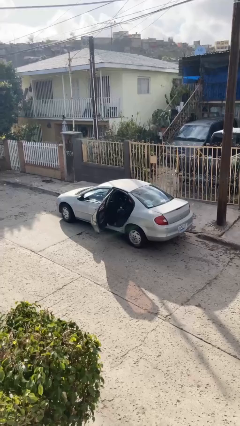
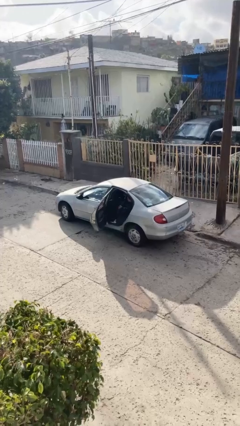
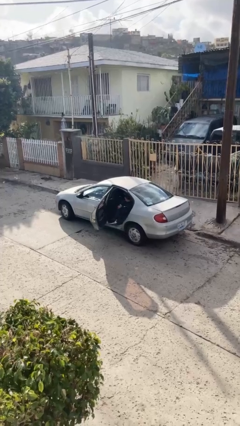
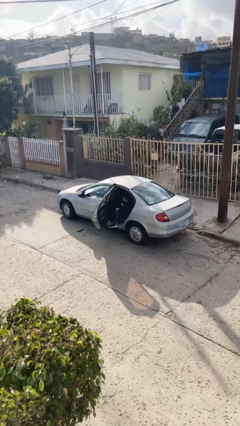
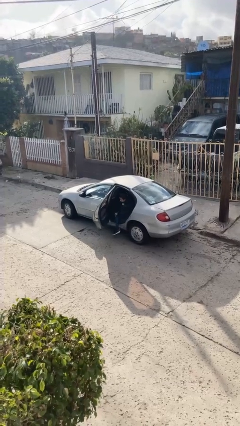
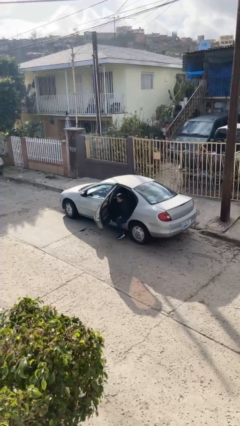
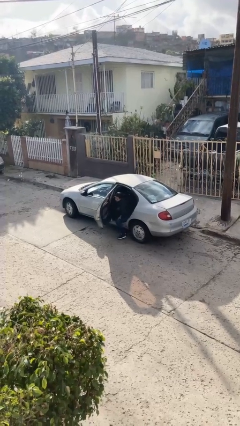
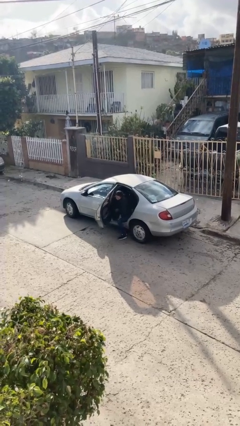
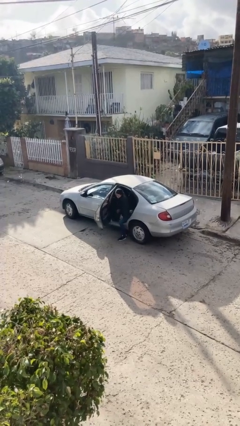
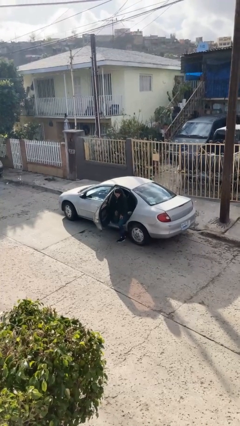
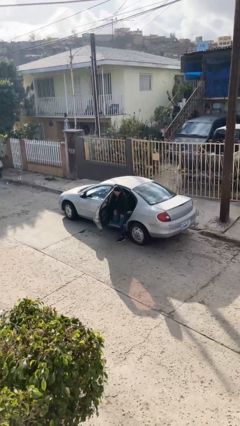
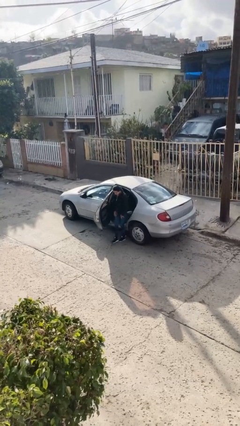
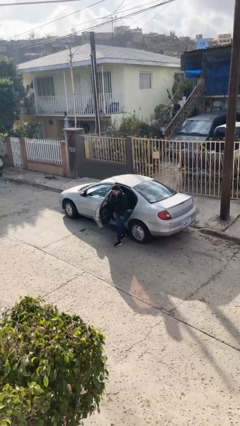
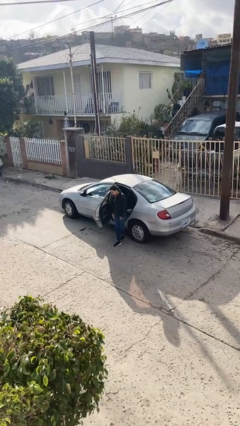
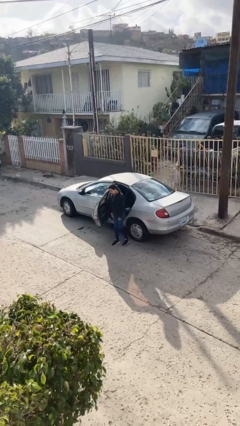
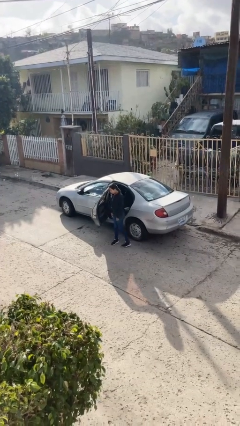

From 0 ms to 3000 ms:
person exits car

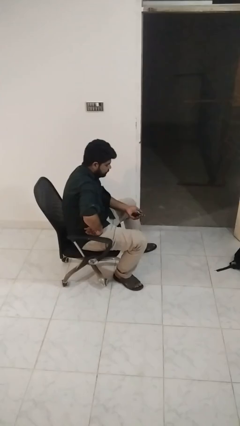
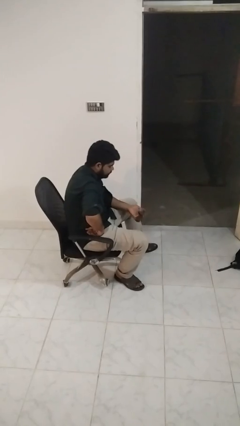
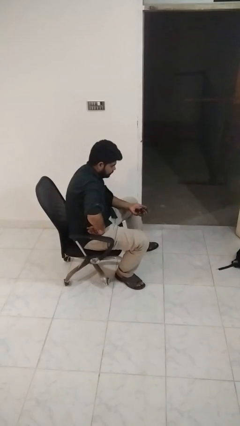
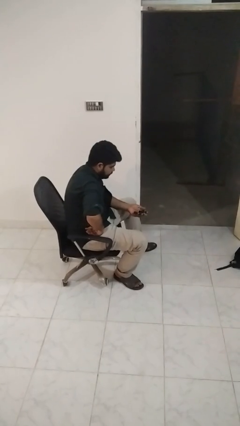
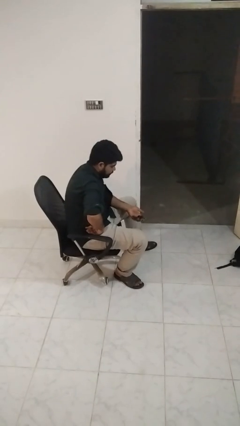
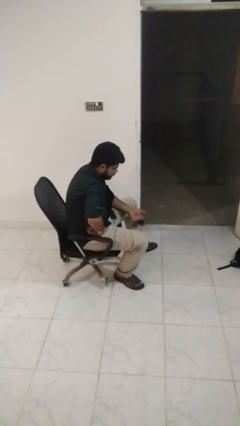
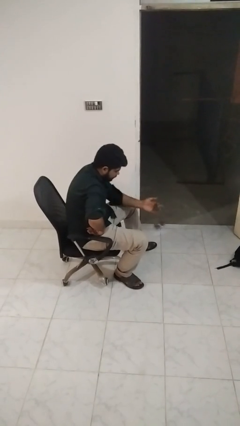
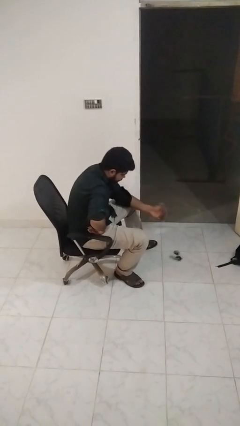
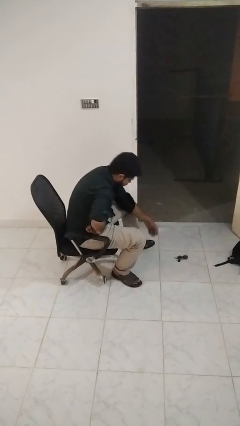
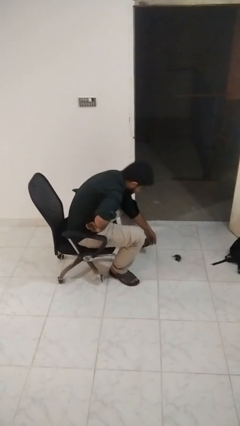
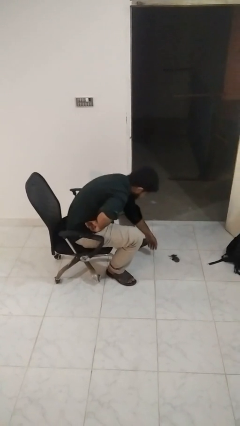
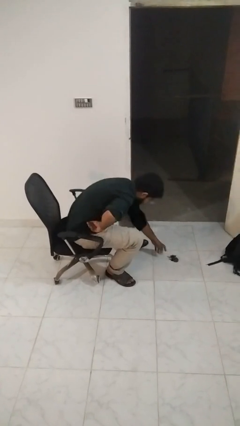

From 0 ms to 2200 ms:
person drops object

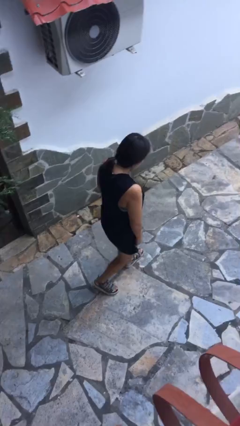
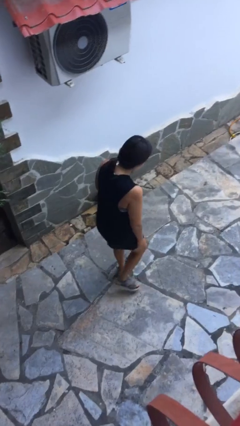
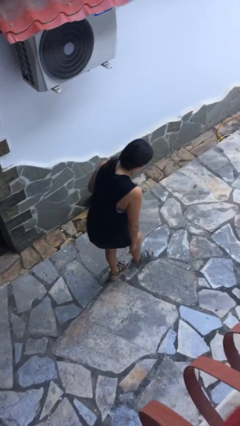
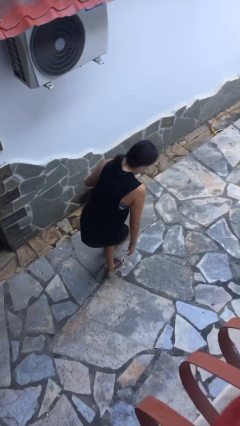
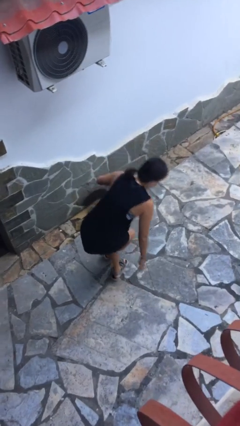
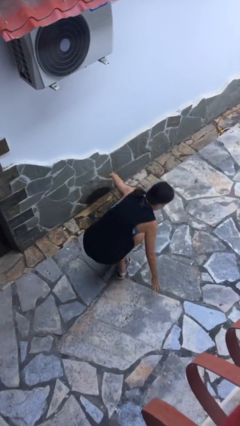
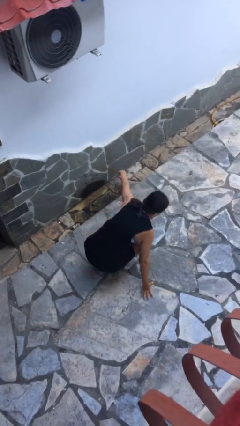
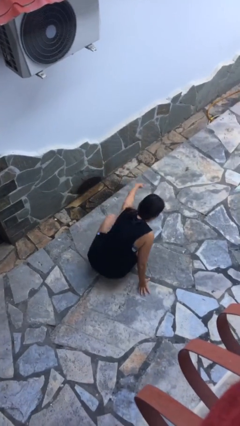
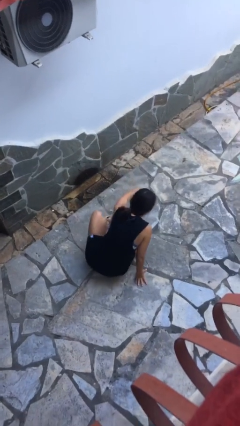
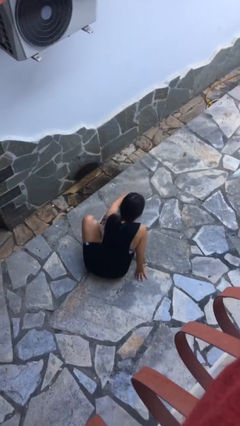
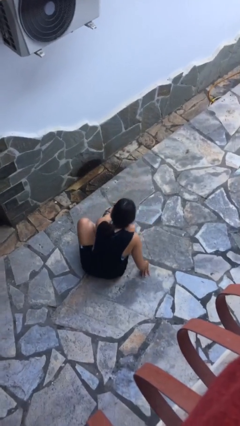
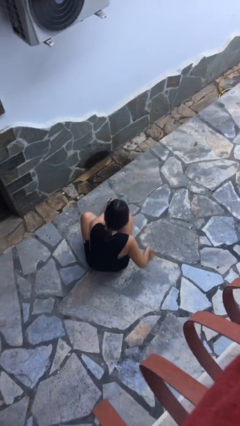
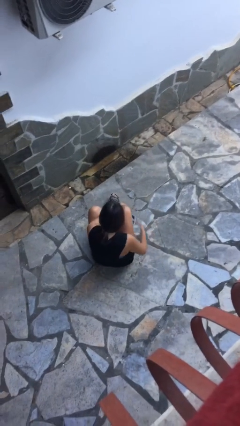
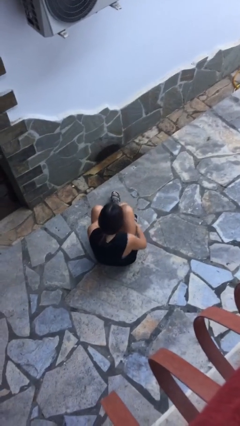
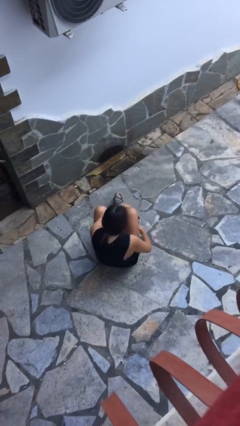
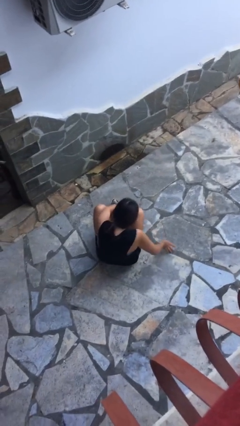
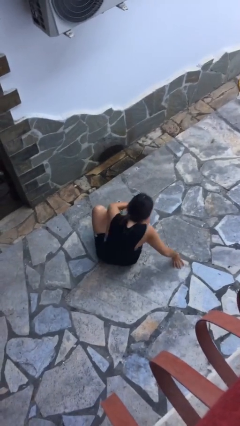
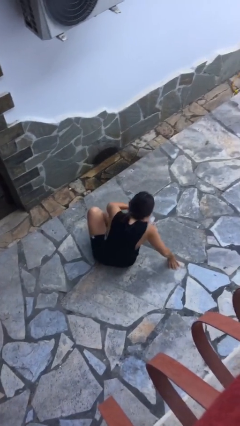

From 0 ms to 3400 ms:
person sits crisscross

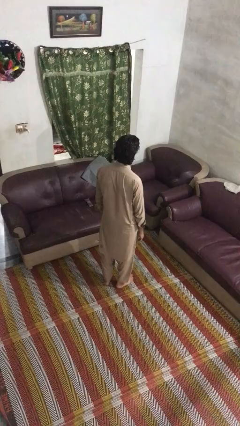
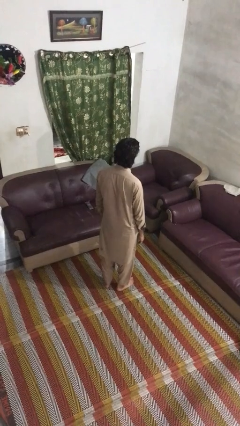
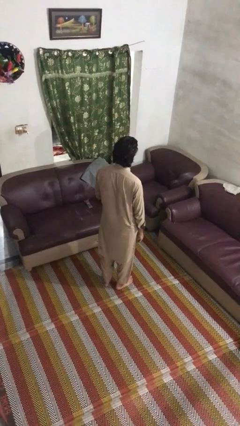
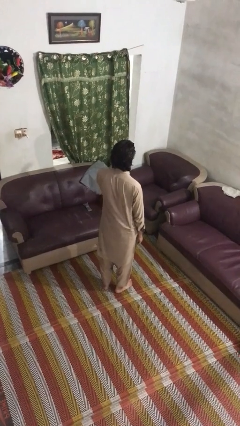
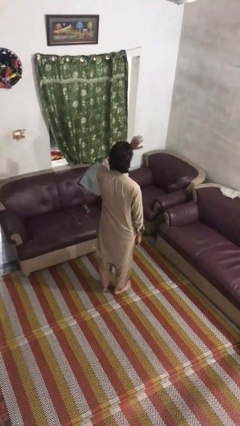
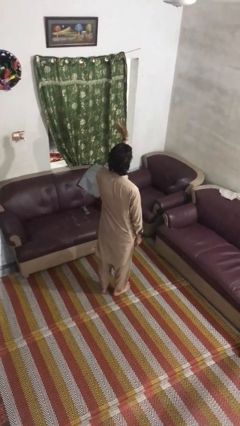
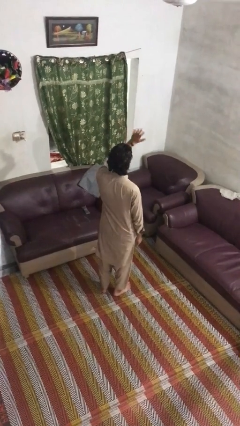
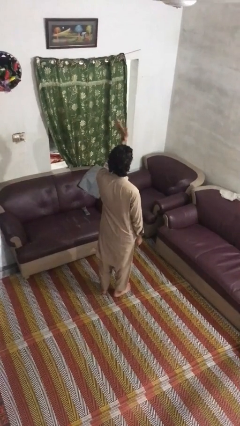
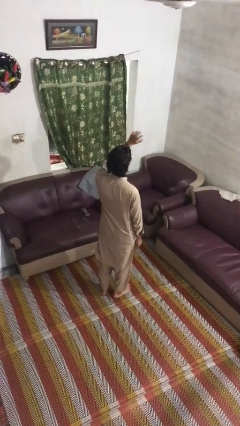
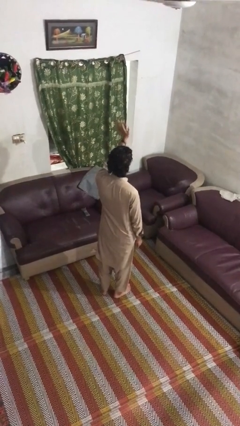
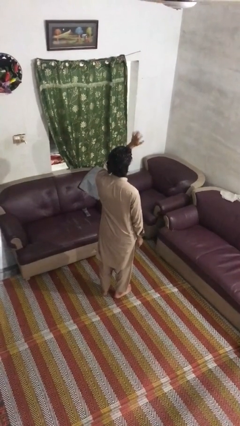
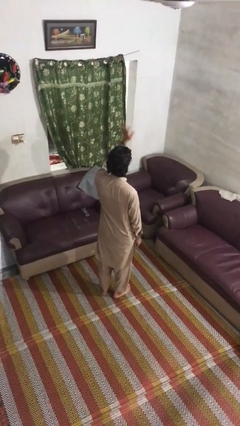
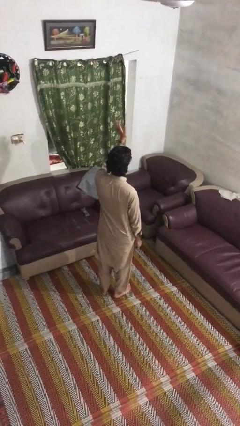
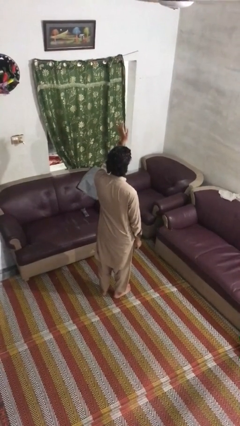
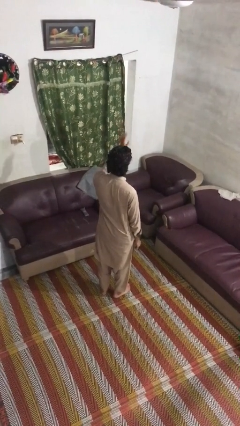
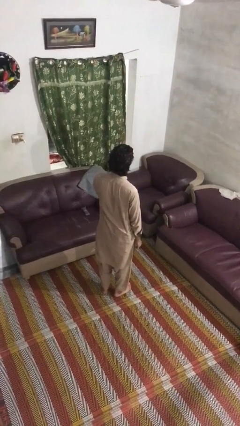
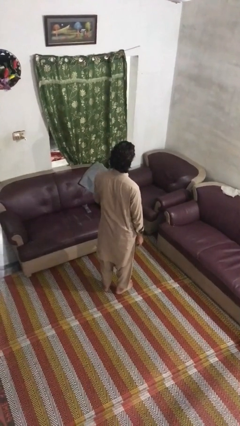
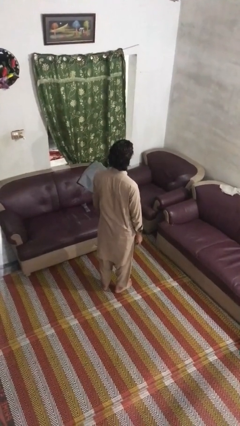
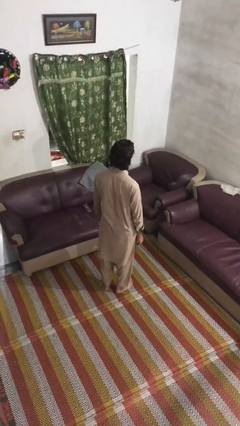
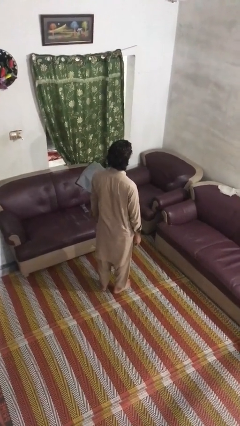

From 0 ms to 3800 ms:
person waves at person

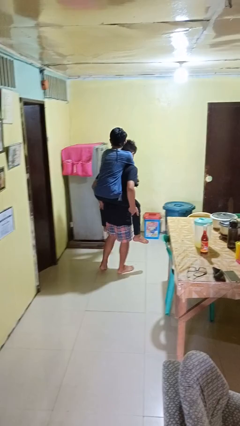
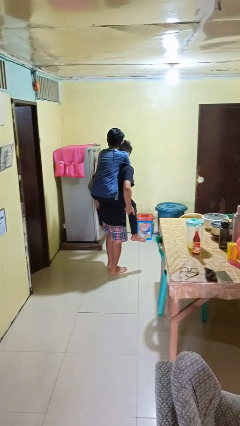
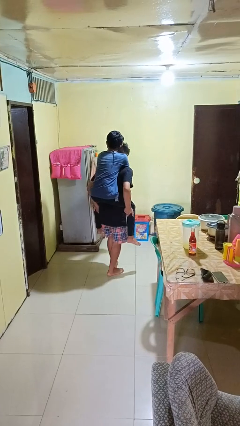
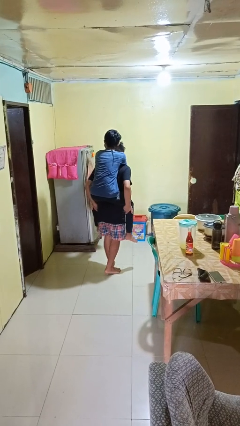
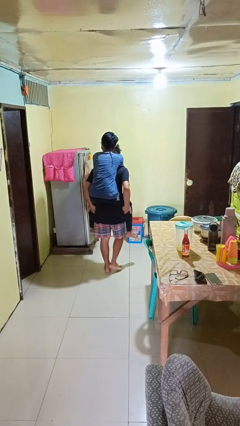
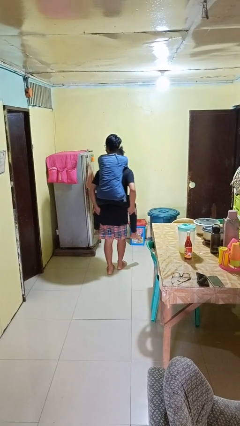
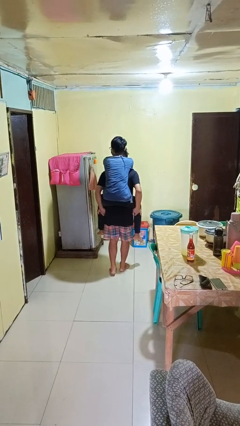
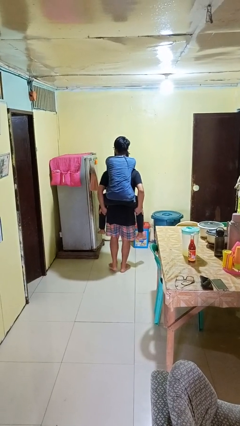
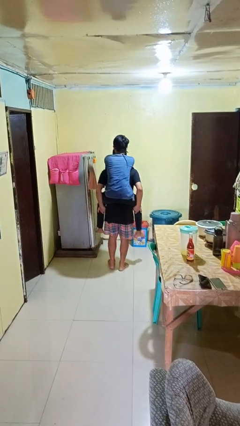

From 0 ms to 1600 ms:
person carries person on back

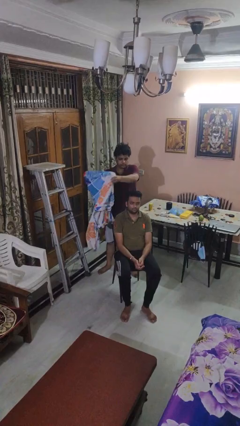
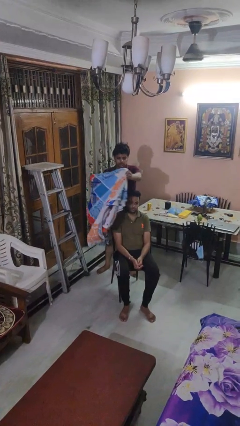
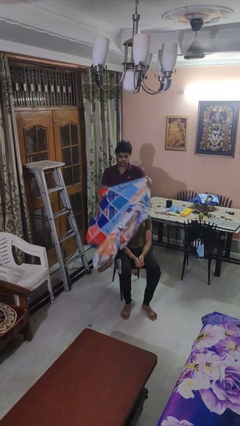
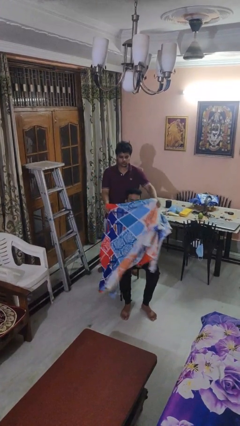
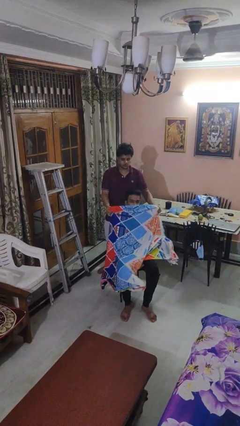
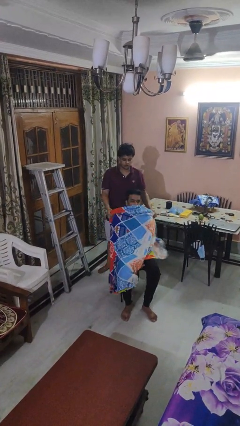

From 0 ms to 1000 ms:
person covers friend with blanket

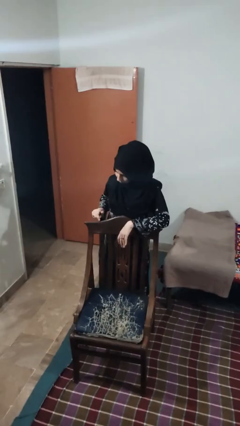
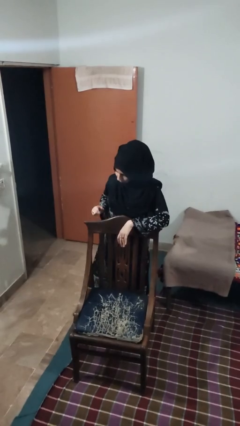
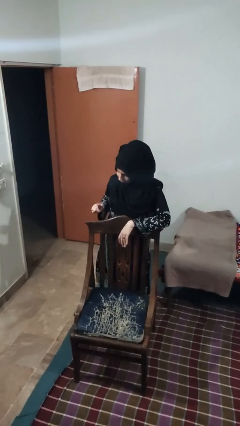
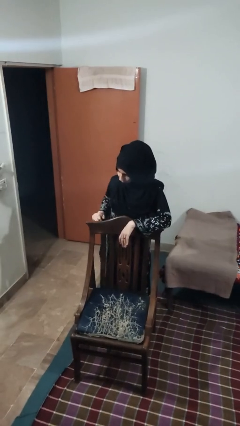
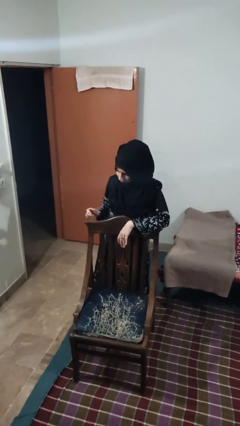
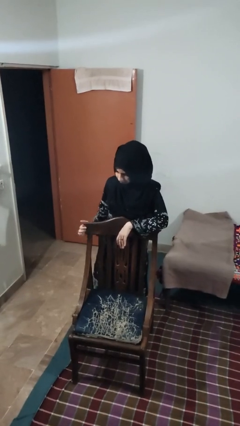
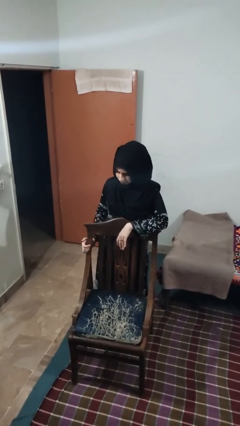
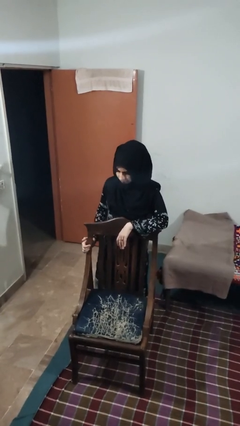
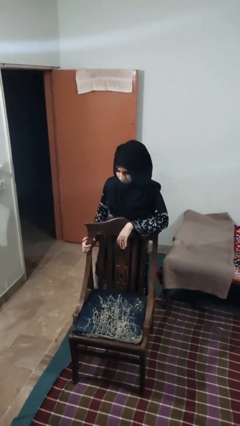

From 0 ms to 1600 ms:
person taps object with finger

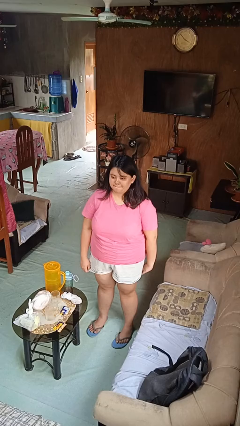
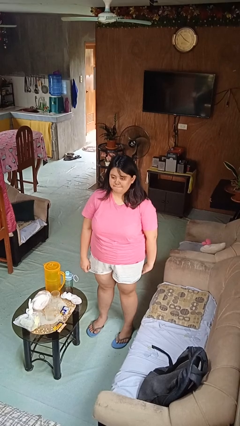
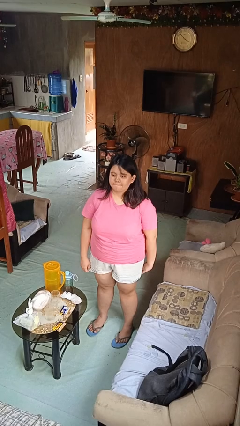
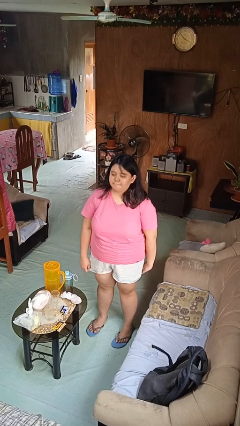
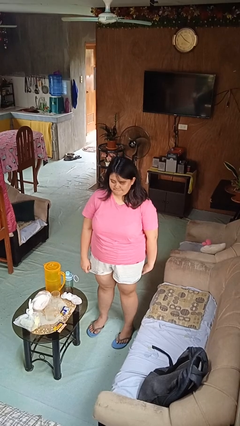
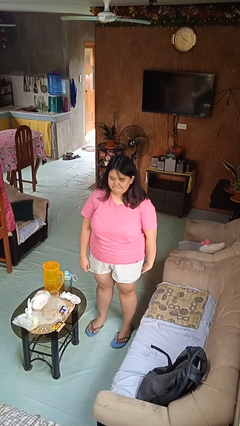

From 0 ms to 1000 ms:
person nods head
